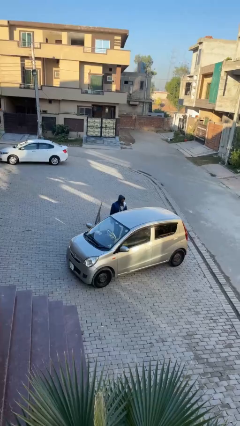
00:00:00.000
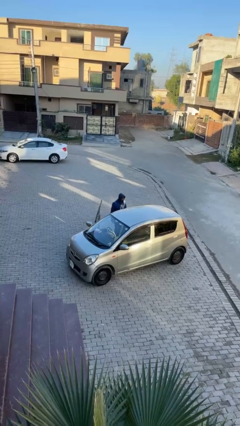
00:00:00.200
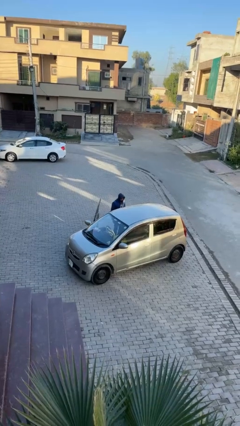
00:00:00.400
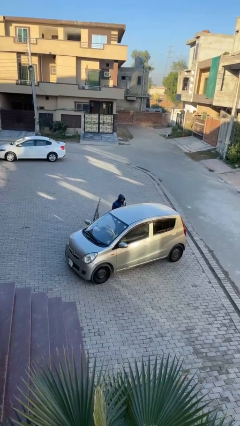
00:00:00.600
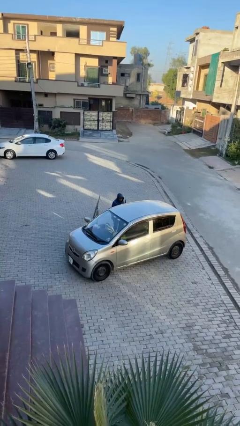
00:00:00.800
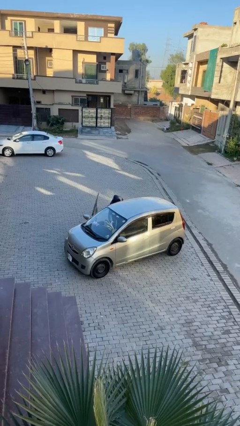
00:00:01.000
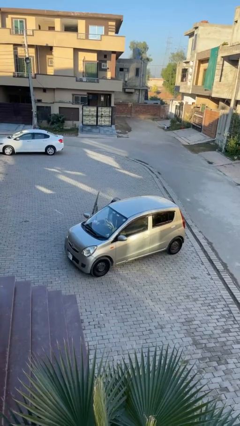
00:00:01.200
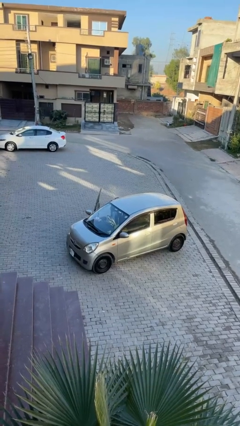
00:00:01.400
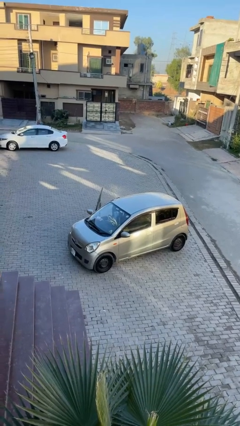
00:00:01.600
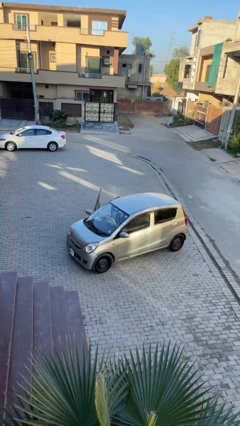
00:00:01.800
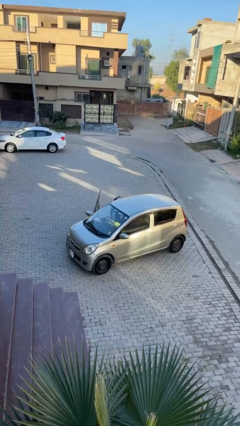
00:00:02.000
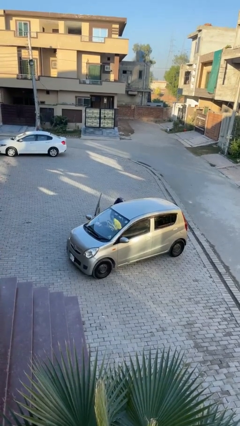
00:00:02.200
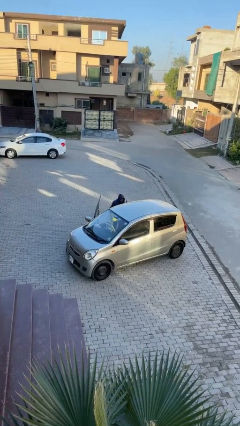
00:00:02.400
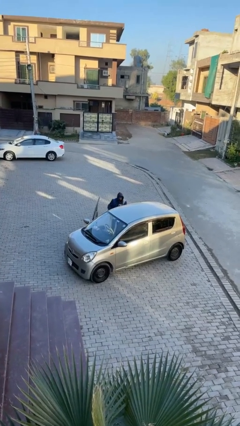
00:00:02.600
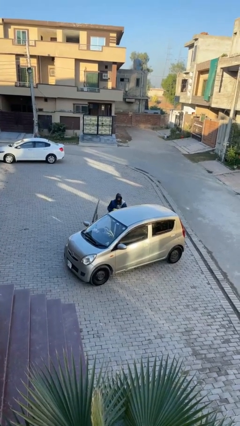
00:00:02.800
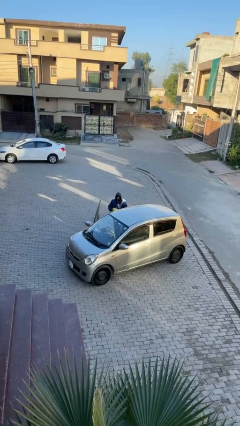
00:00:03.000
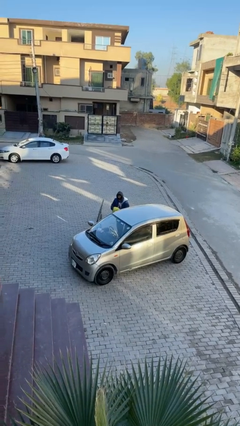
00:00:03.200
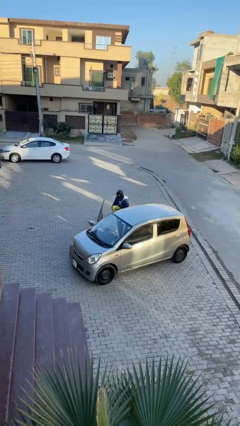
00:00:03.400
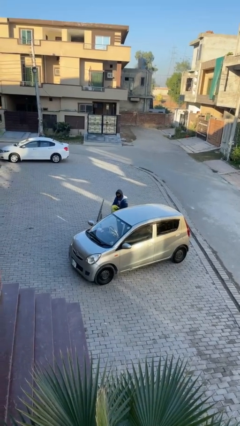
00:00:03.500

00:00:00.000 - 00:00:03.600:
person unloads car

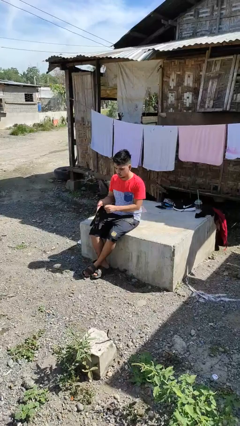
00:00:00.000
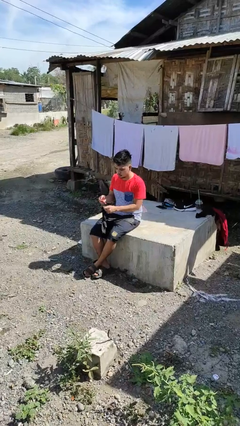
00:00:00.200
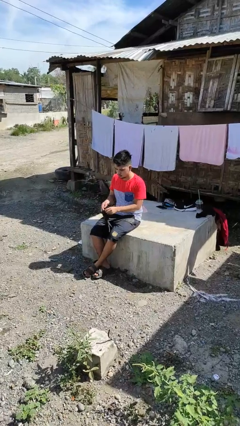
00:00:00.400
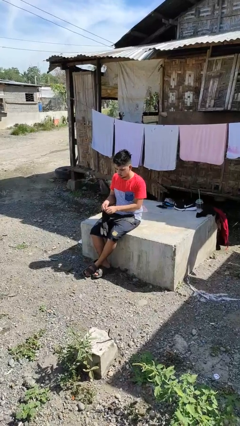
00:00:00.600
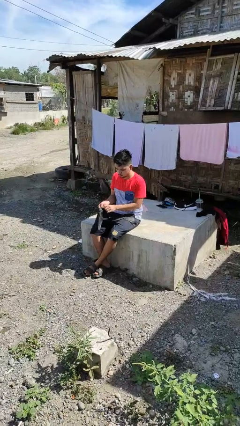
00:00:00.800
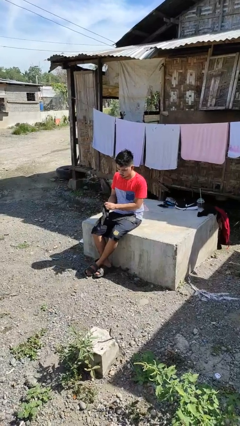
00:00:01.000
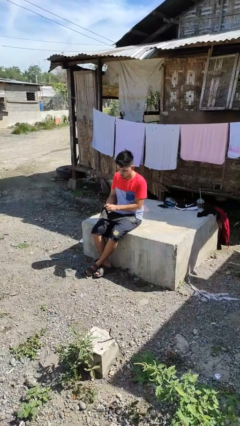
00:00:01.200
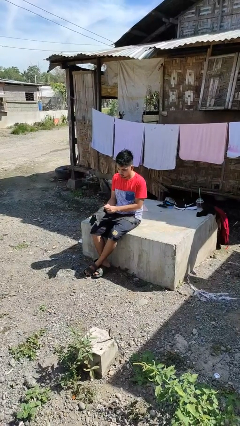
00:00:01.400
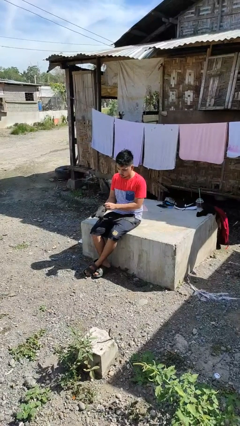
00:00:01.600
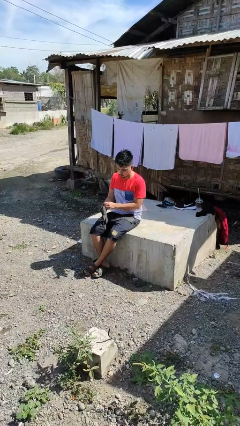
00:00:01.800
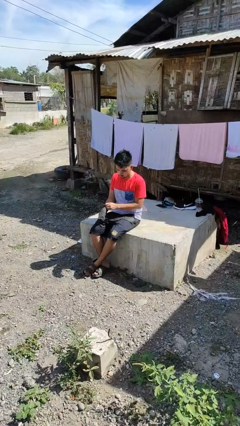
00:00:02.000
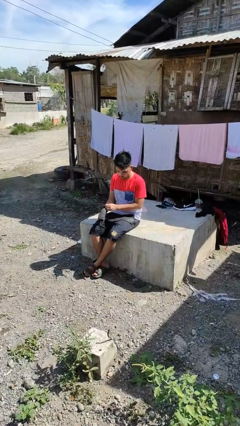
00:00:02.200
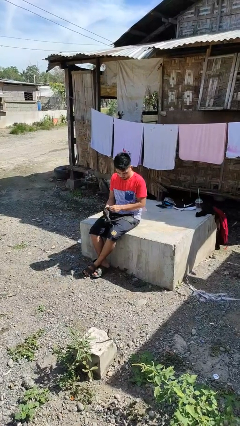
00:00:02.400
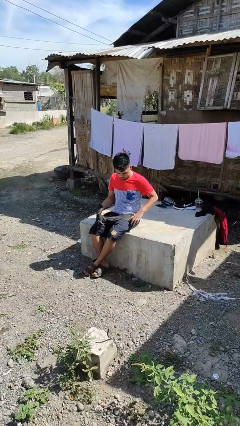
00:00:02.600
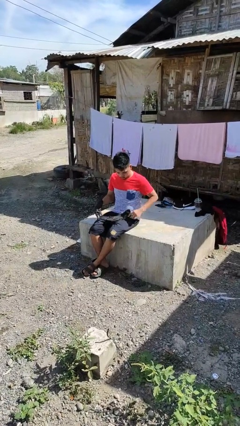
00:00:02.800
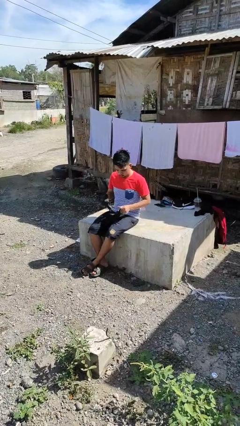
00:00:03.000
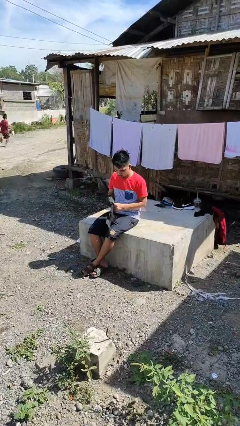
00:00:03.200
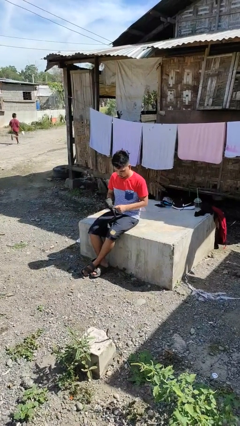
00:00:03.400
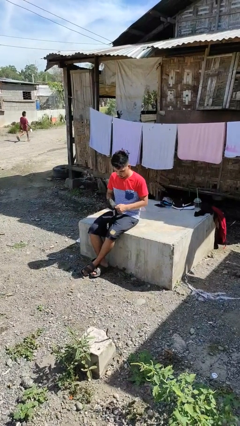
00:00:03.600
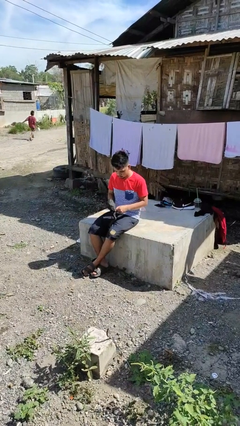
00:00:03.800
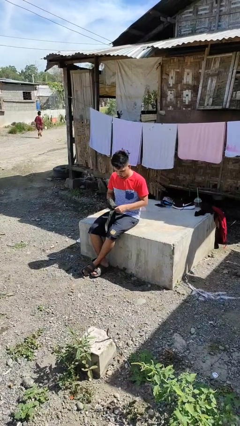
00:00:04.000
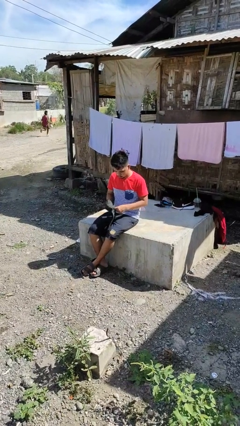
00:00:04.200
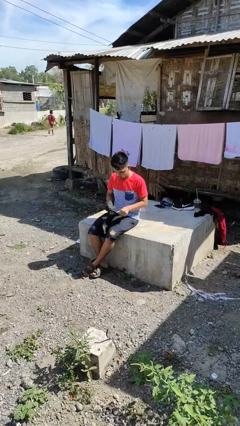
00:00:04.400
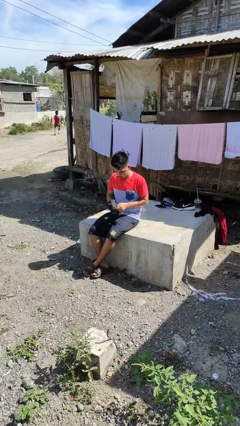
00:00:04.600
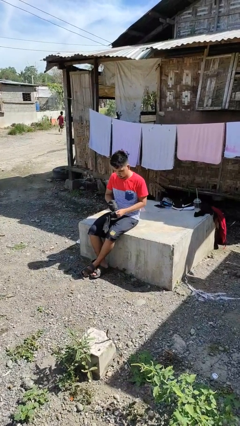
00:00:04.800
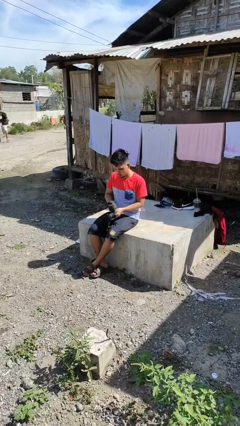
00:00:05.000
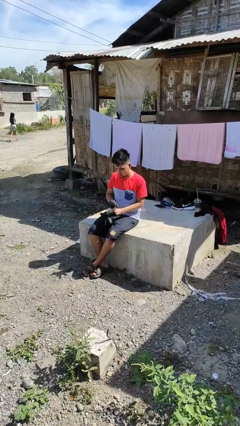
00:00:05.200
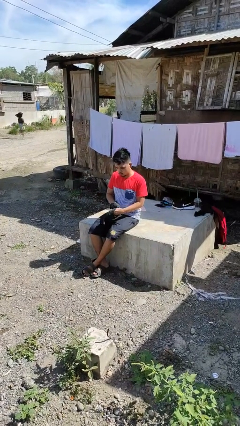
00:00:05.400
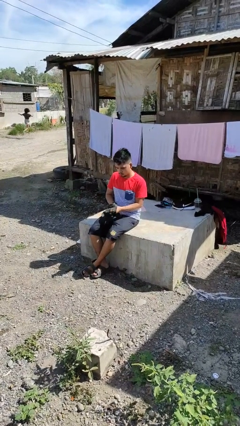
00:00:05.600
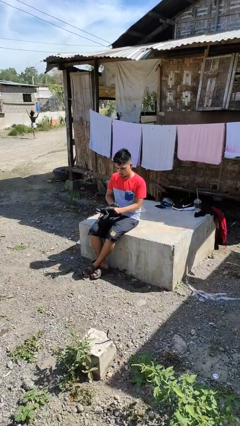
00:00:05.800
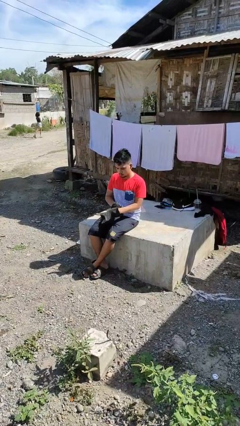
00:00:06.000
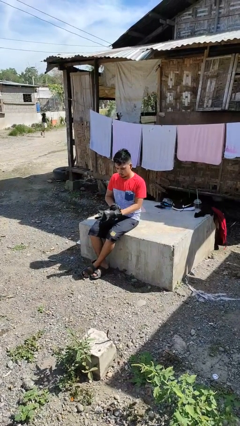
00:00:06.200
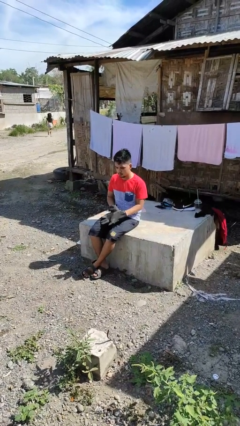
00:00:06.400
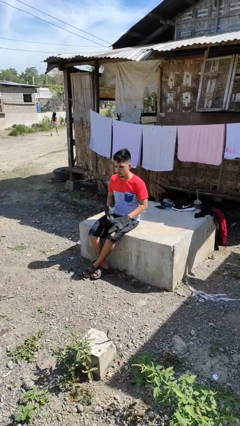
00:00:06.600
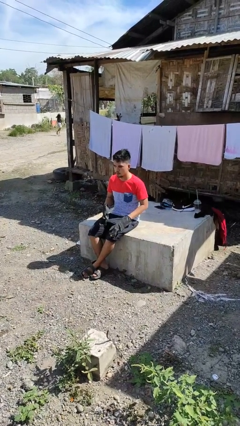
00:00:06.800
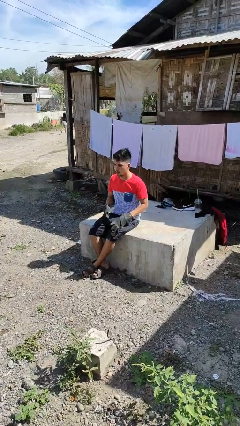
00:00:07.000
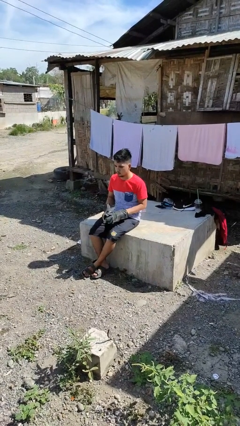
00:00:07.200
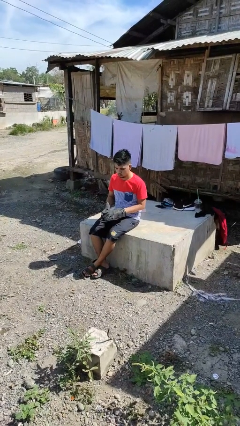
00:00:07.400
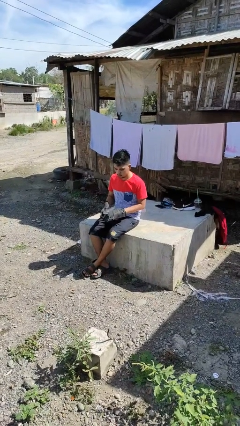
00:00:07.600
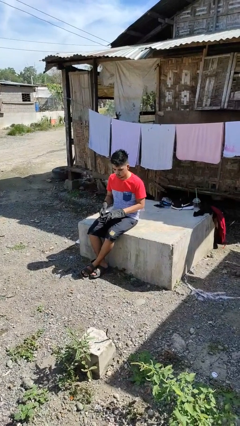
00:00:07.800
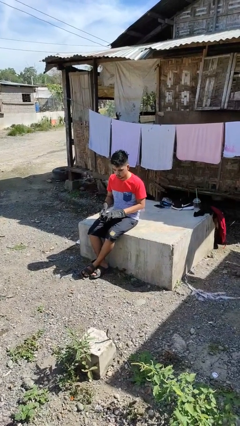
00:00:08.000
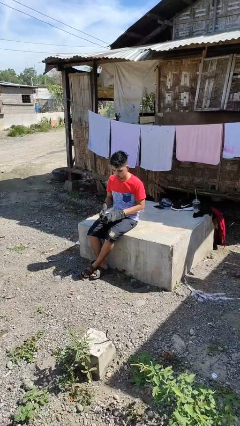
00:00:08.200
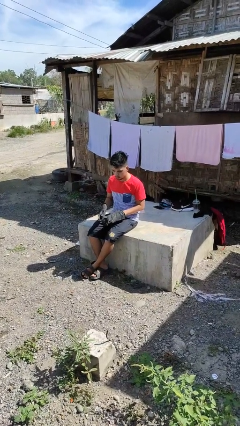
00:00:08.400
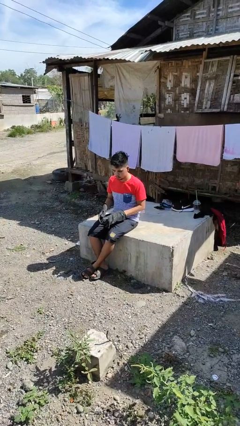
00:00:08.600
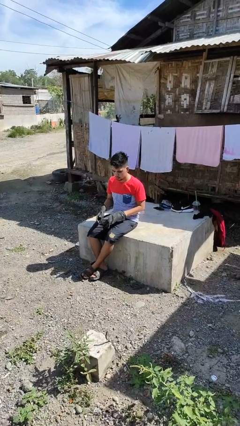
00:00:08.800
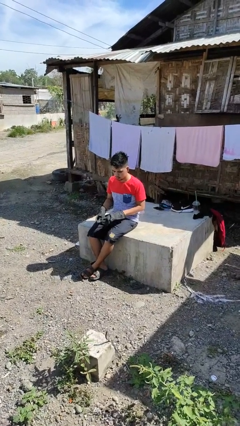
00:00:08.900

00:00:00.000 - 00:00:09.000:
person puts on gloves

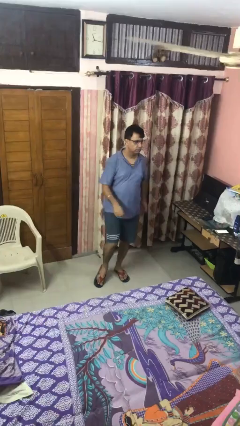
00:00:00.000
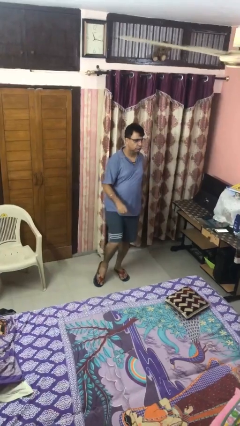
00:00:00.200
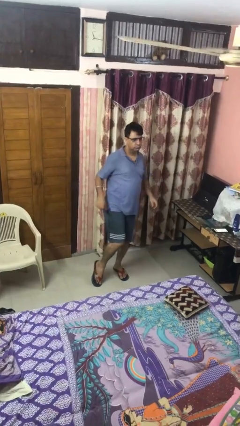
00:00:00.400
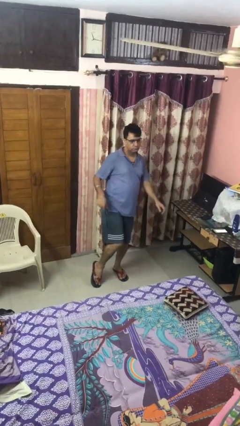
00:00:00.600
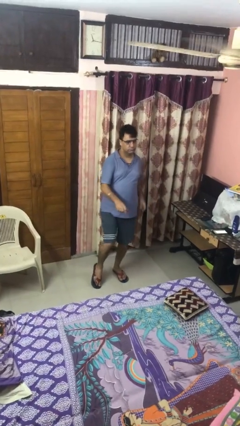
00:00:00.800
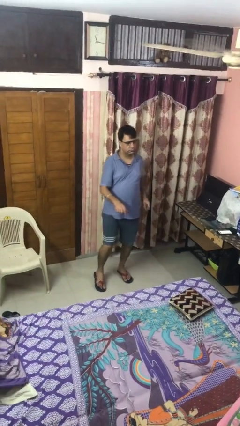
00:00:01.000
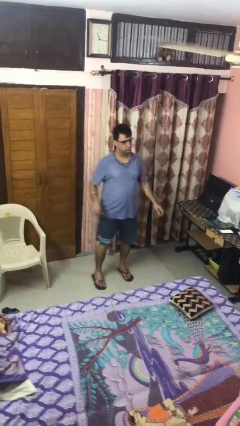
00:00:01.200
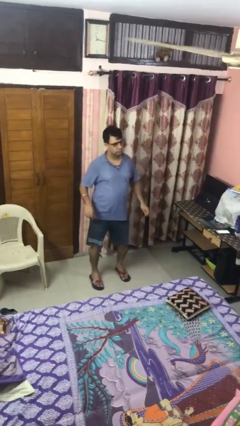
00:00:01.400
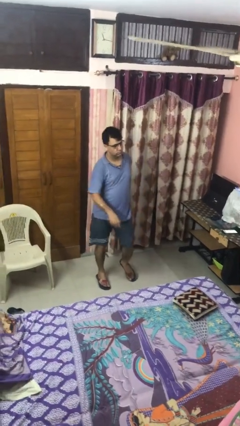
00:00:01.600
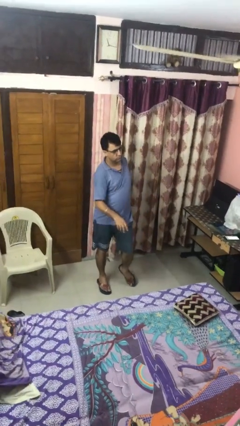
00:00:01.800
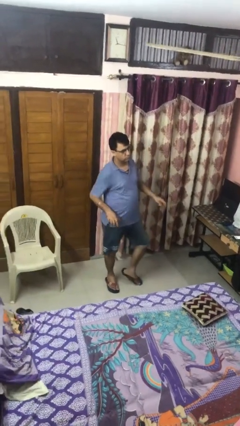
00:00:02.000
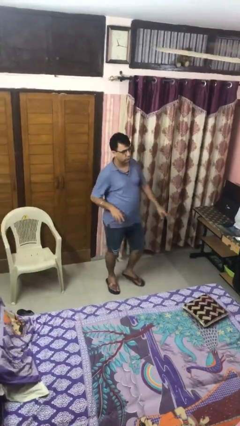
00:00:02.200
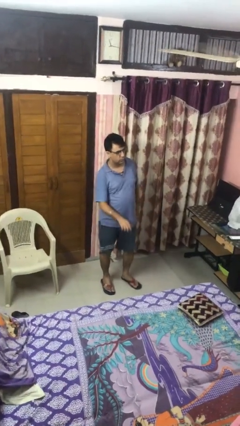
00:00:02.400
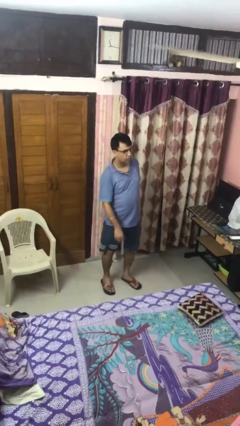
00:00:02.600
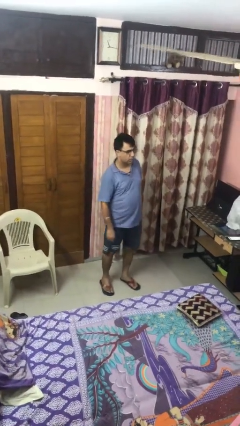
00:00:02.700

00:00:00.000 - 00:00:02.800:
person dances in place

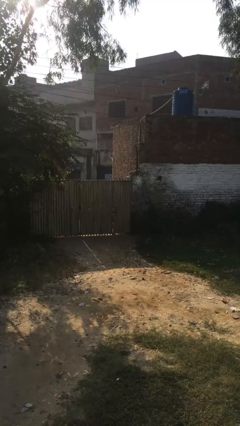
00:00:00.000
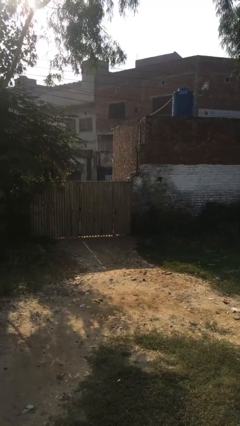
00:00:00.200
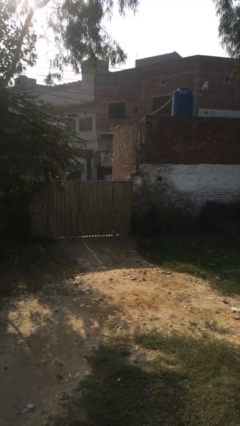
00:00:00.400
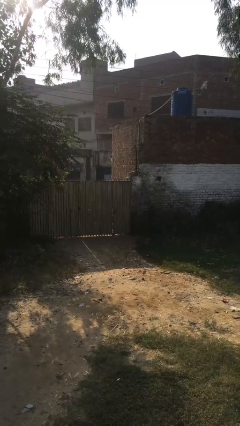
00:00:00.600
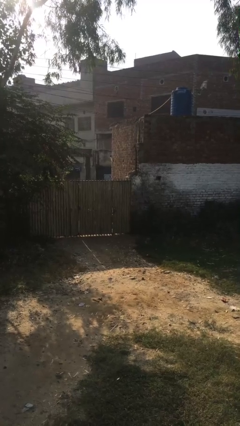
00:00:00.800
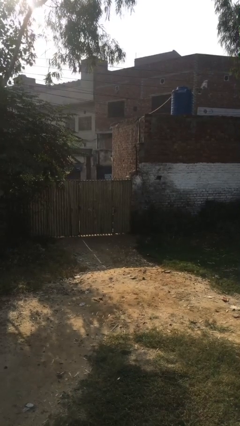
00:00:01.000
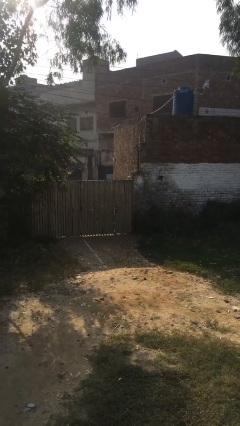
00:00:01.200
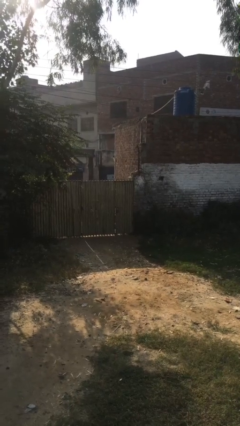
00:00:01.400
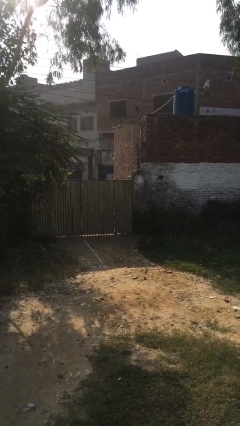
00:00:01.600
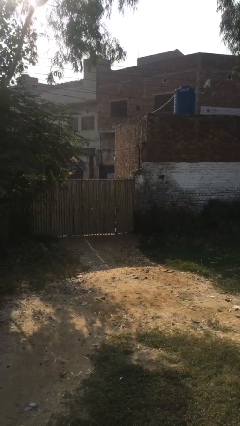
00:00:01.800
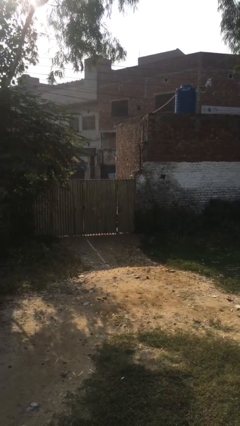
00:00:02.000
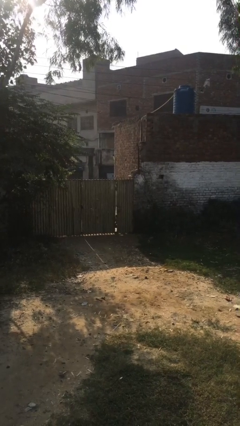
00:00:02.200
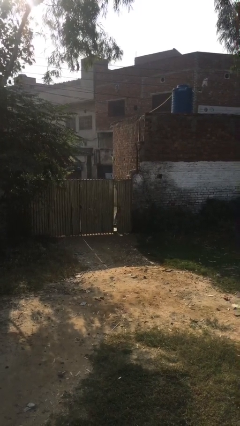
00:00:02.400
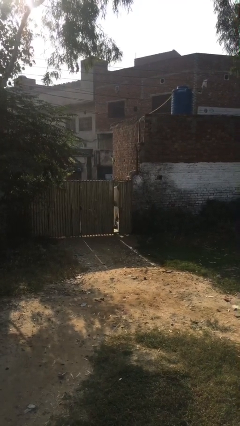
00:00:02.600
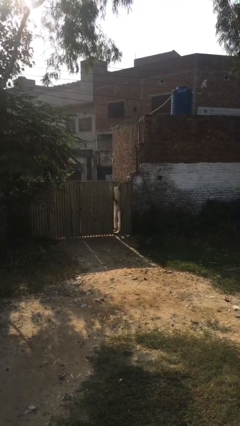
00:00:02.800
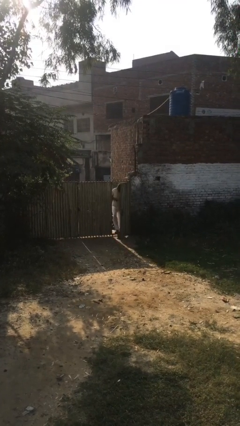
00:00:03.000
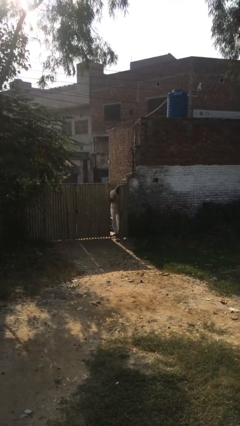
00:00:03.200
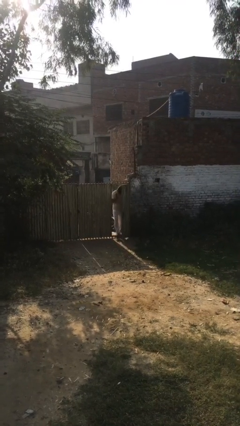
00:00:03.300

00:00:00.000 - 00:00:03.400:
person opens facility door
